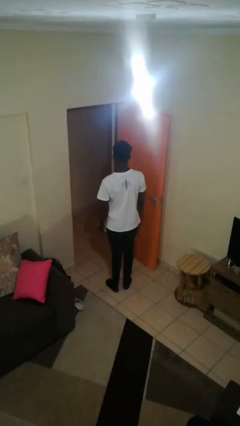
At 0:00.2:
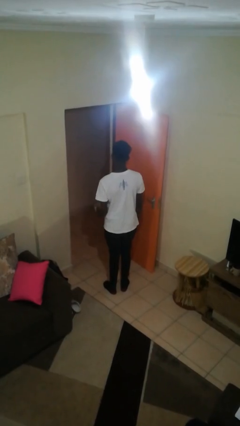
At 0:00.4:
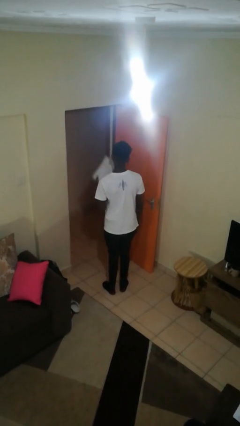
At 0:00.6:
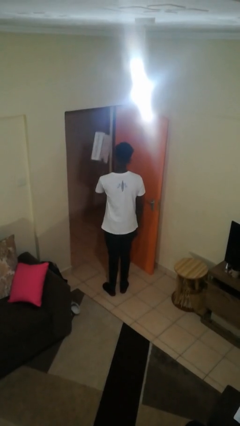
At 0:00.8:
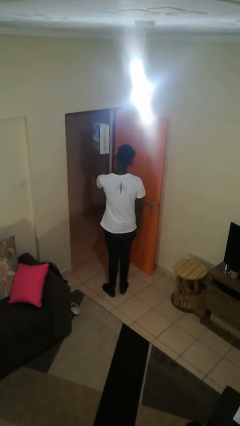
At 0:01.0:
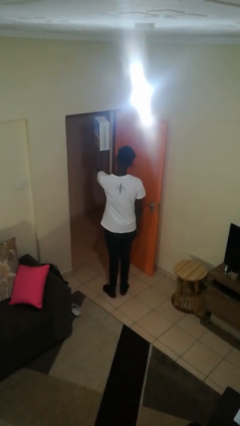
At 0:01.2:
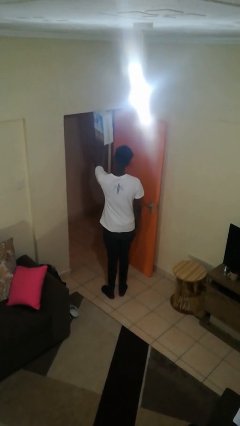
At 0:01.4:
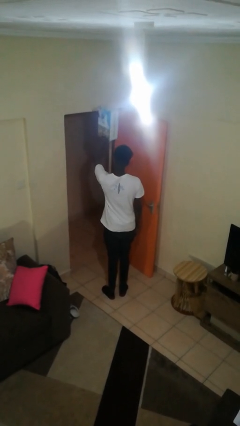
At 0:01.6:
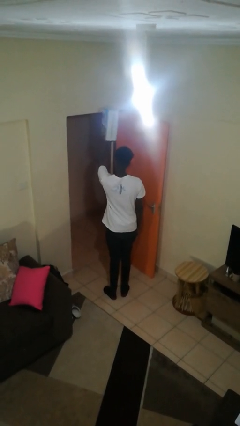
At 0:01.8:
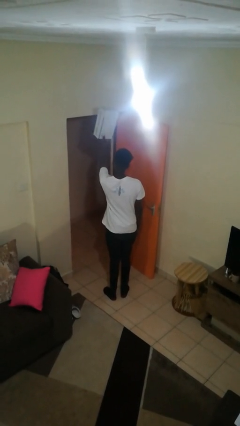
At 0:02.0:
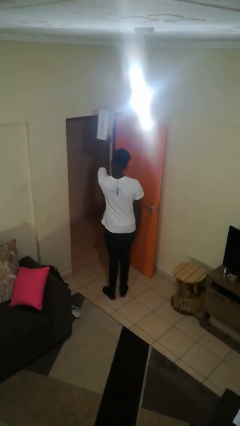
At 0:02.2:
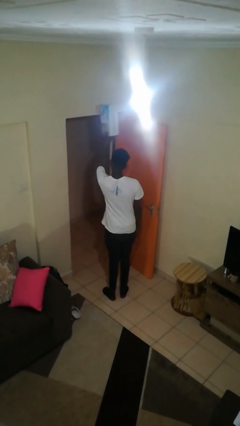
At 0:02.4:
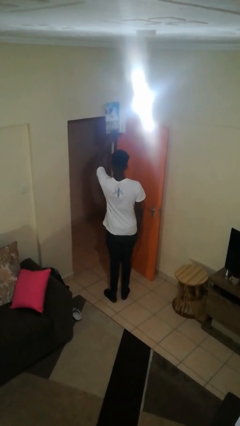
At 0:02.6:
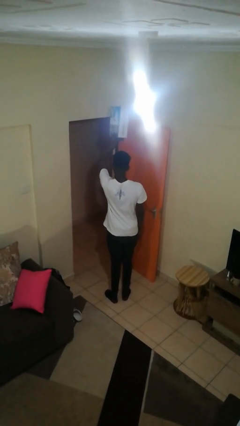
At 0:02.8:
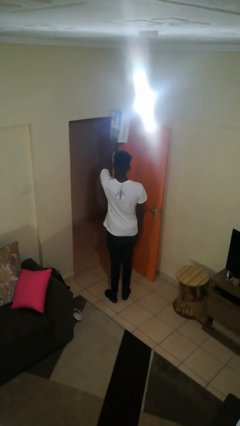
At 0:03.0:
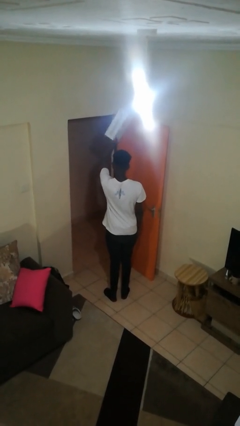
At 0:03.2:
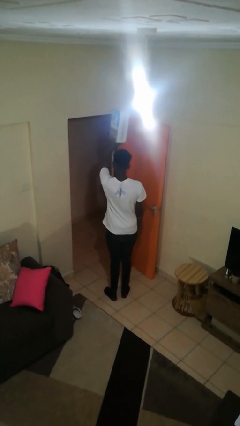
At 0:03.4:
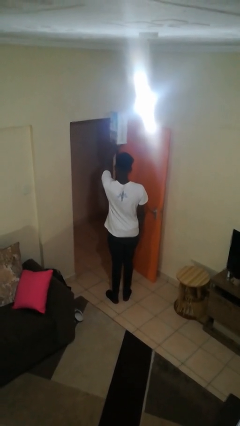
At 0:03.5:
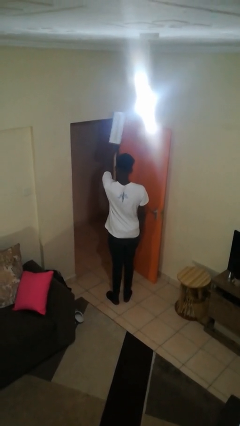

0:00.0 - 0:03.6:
person holds object above head

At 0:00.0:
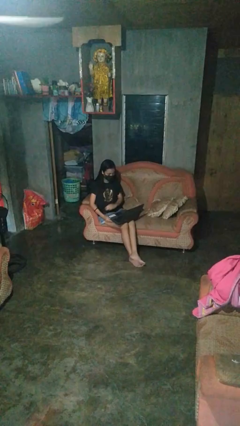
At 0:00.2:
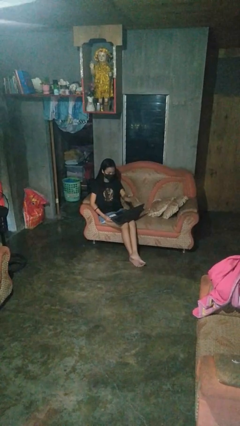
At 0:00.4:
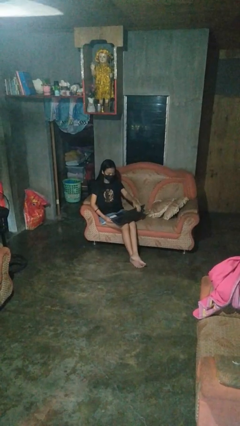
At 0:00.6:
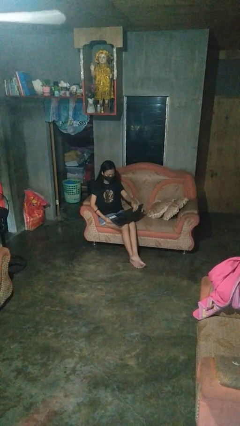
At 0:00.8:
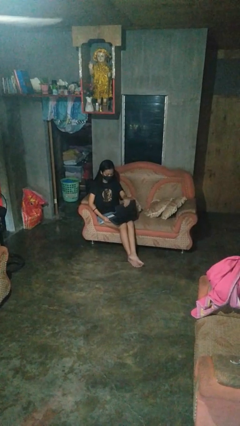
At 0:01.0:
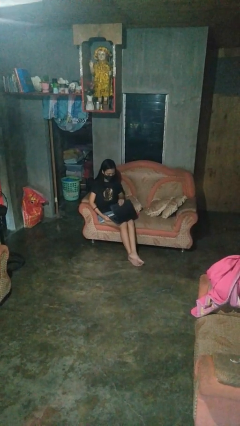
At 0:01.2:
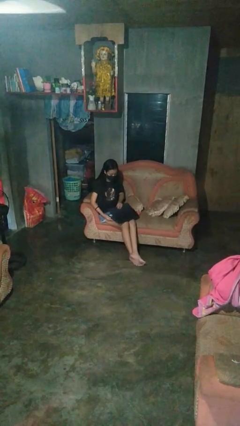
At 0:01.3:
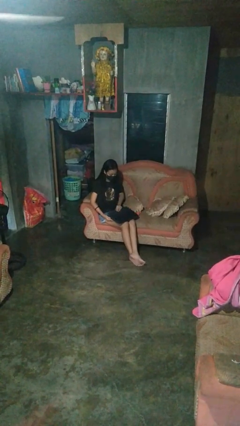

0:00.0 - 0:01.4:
person closes laptop

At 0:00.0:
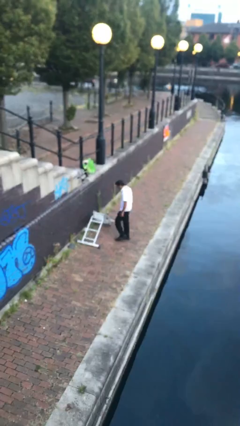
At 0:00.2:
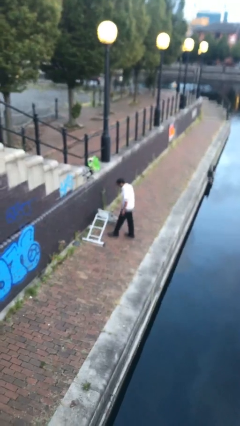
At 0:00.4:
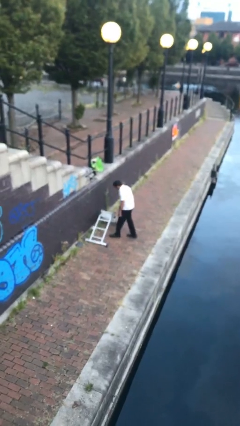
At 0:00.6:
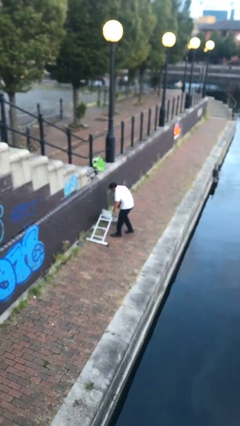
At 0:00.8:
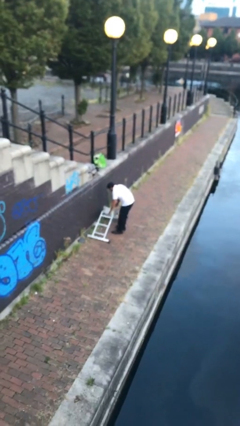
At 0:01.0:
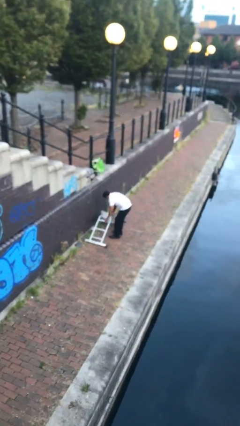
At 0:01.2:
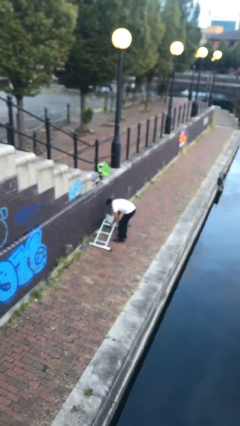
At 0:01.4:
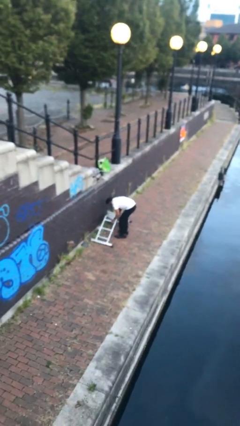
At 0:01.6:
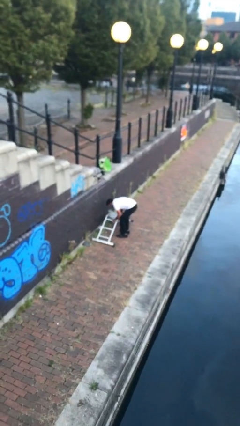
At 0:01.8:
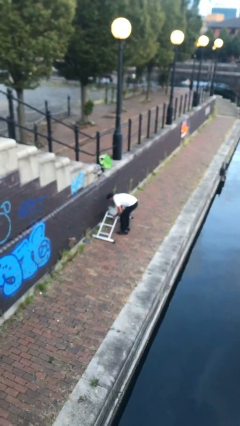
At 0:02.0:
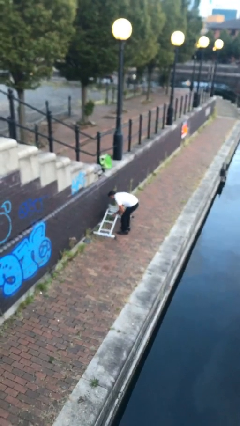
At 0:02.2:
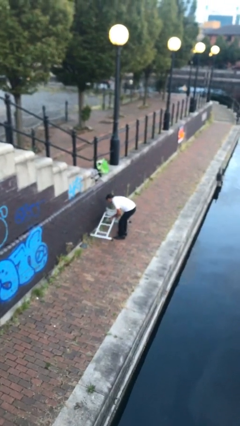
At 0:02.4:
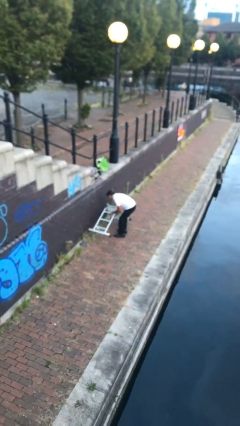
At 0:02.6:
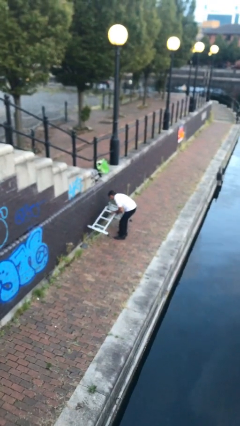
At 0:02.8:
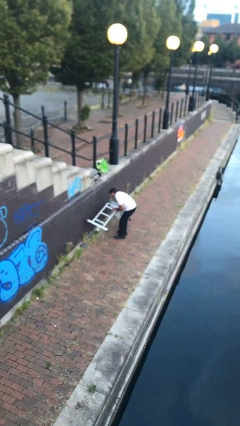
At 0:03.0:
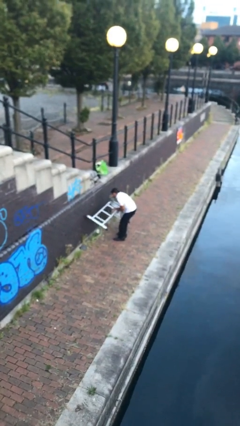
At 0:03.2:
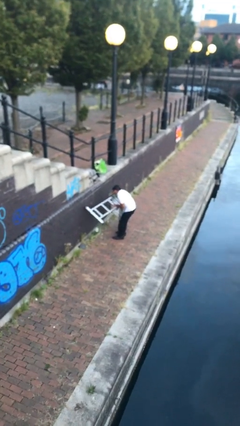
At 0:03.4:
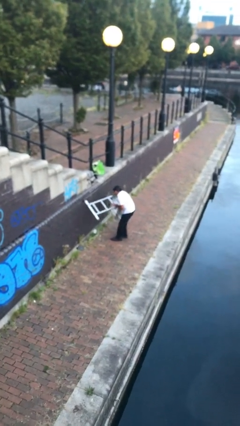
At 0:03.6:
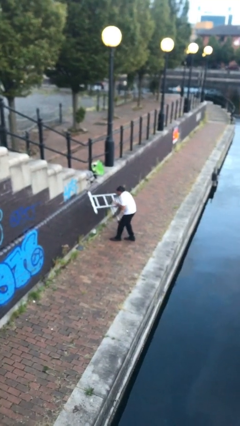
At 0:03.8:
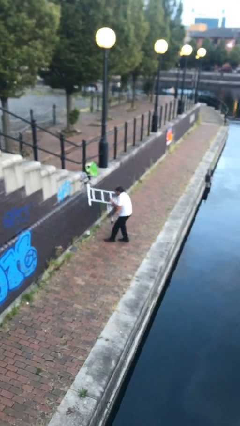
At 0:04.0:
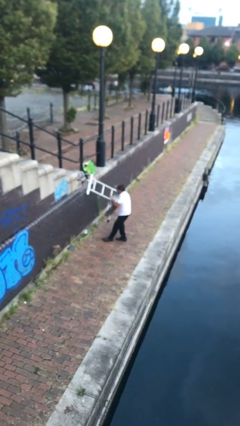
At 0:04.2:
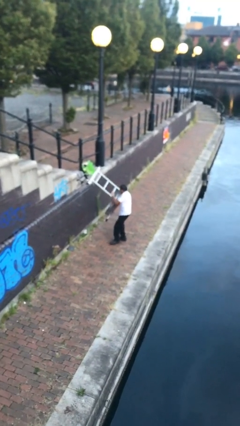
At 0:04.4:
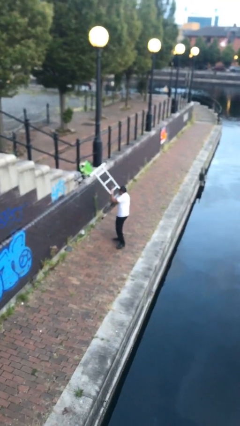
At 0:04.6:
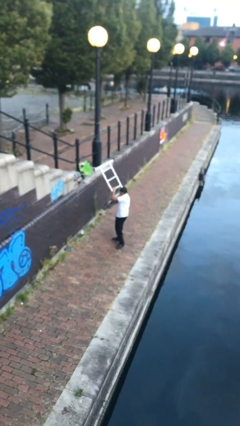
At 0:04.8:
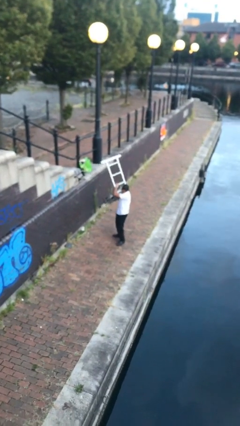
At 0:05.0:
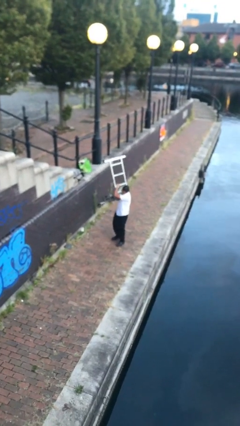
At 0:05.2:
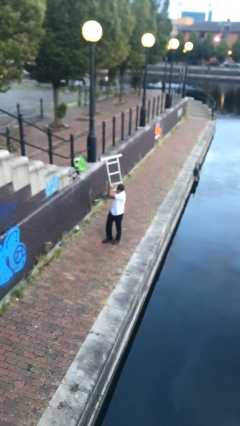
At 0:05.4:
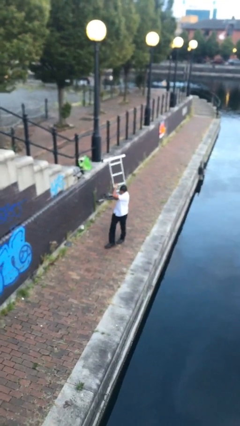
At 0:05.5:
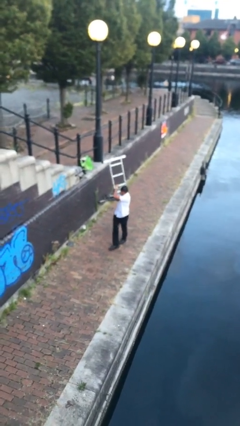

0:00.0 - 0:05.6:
person picks up object from floor

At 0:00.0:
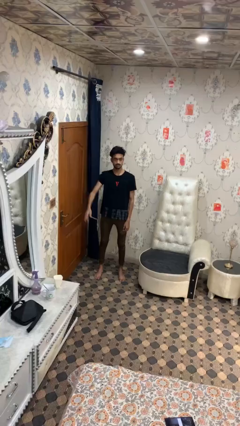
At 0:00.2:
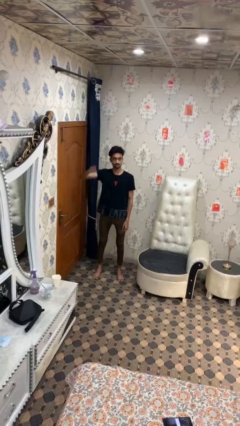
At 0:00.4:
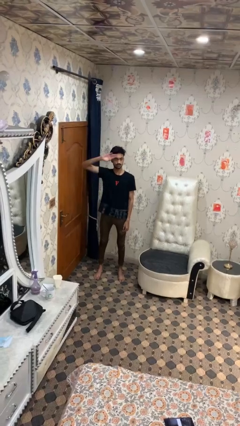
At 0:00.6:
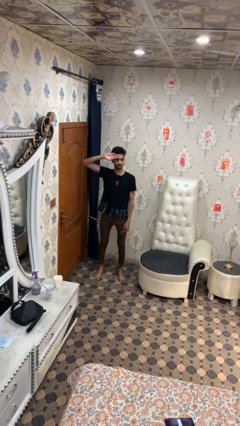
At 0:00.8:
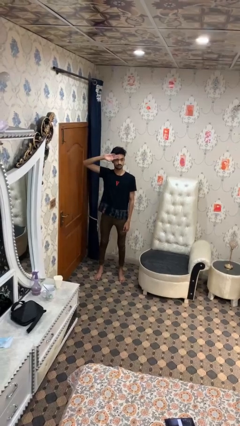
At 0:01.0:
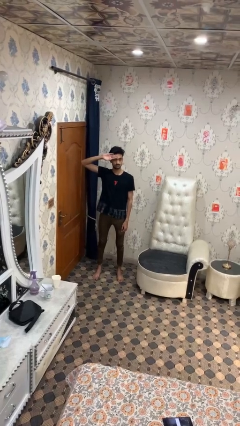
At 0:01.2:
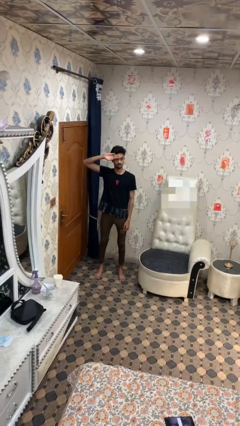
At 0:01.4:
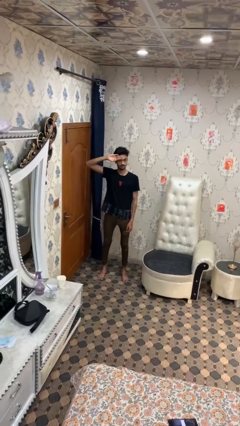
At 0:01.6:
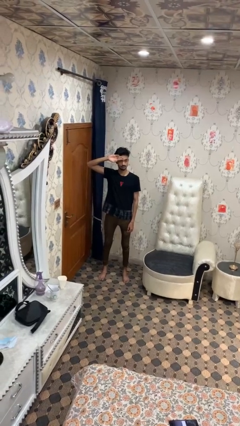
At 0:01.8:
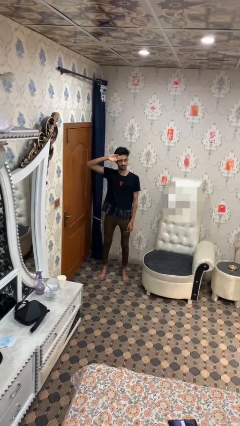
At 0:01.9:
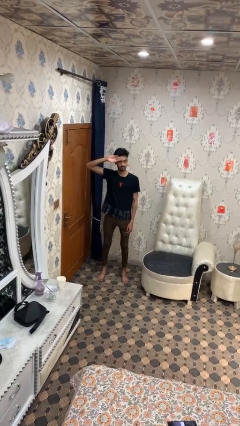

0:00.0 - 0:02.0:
person salutes

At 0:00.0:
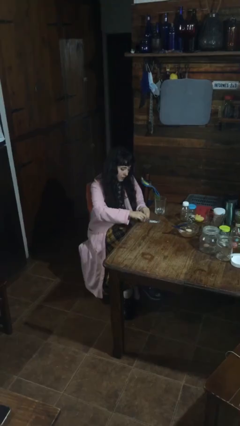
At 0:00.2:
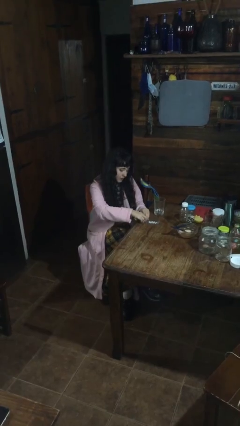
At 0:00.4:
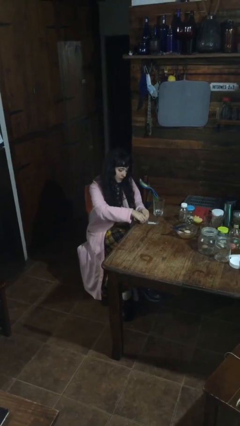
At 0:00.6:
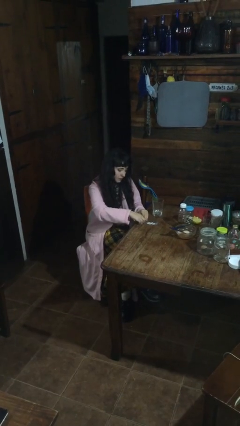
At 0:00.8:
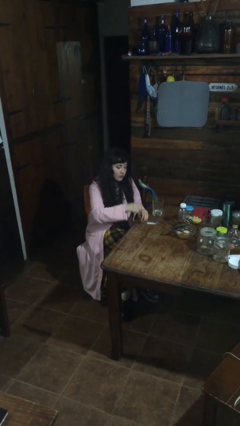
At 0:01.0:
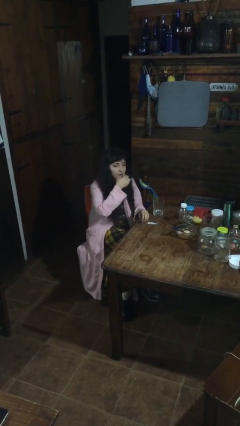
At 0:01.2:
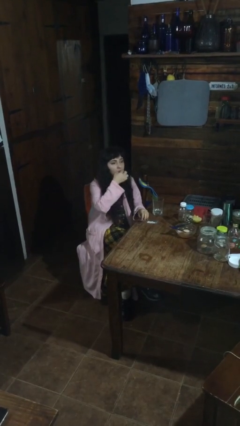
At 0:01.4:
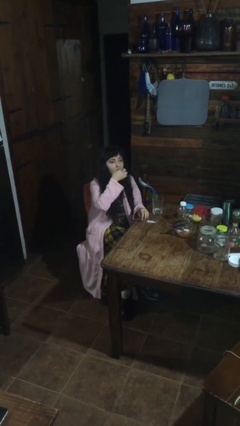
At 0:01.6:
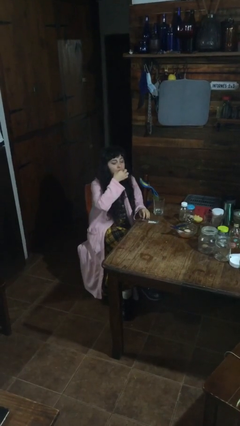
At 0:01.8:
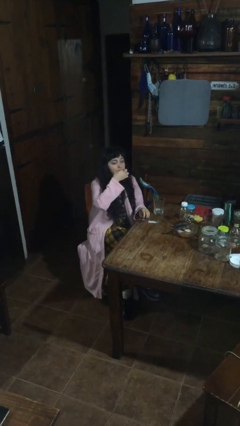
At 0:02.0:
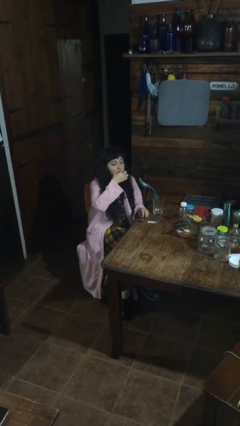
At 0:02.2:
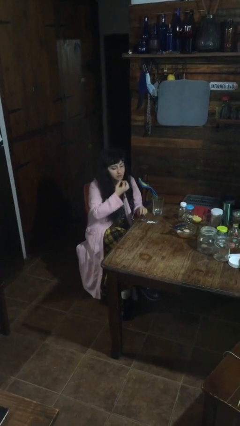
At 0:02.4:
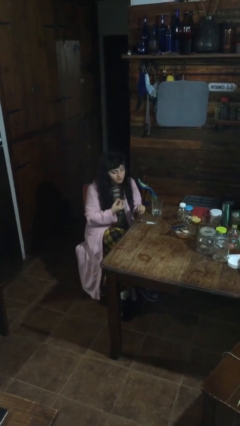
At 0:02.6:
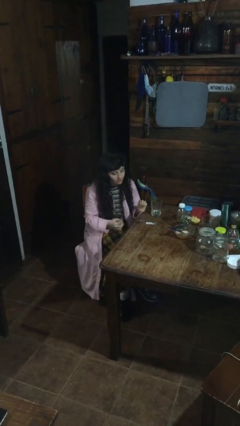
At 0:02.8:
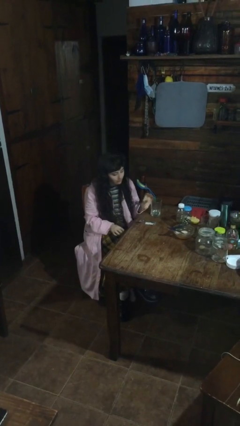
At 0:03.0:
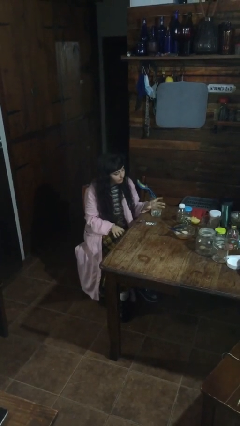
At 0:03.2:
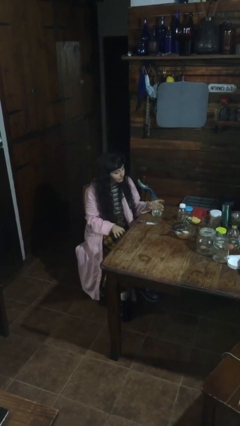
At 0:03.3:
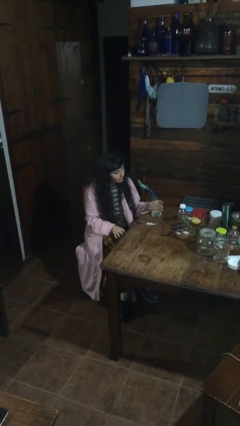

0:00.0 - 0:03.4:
person takes medicine pills

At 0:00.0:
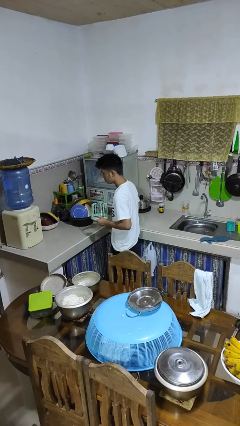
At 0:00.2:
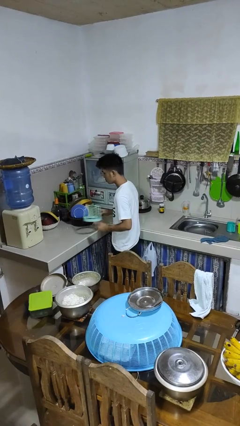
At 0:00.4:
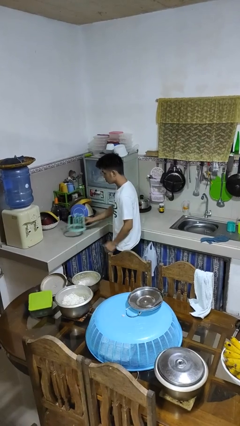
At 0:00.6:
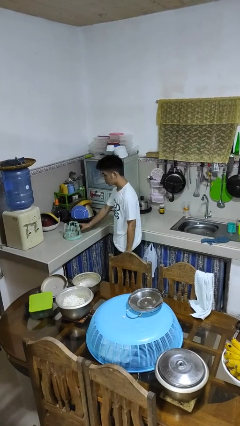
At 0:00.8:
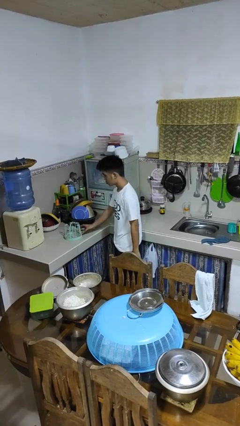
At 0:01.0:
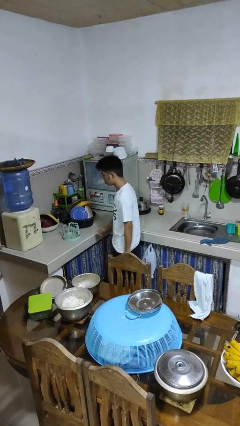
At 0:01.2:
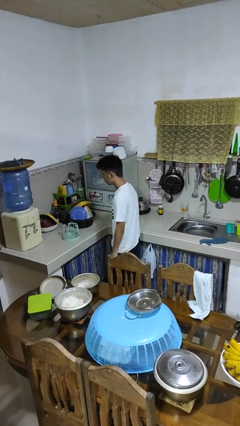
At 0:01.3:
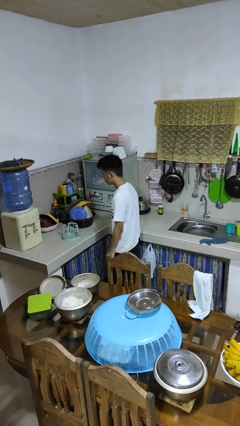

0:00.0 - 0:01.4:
person puts down object on countertop
